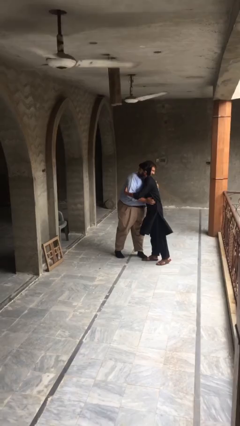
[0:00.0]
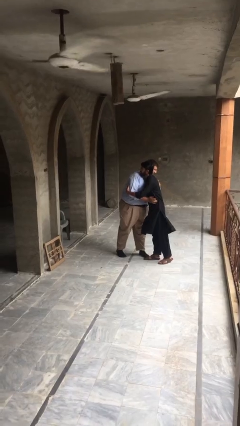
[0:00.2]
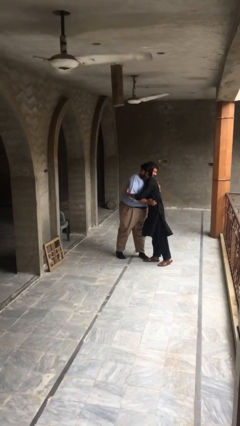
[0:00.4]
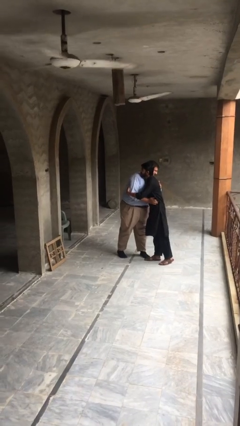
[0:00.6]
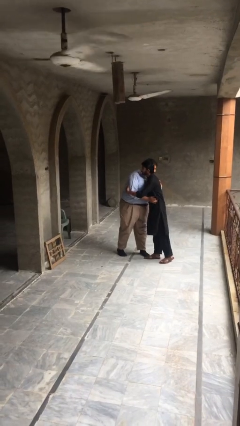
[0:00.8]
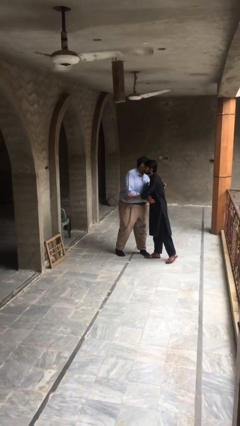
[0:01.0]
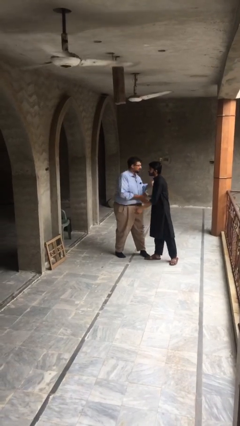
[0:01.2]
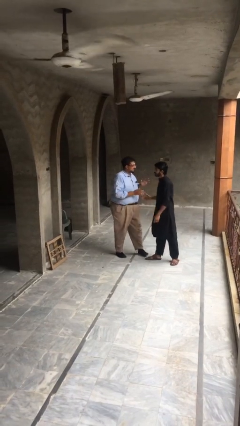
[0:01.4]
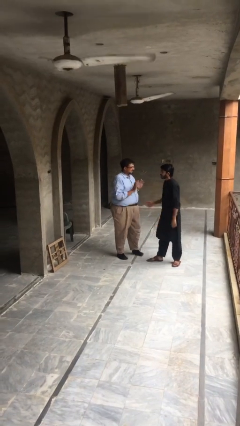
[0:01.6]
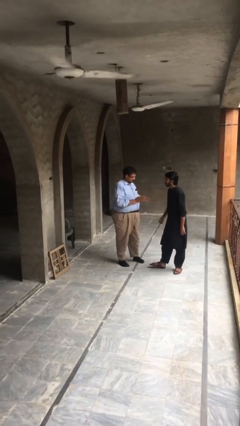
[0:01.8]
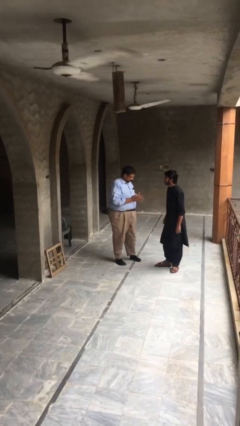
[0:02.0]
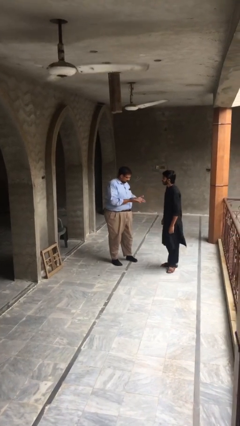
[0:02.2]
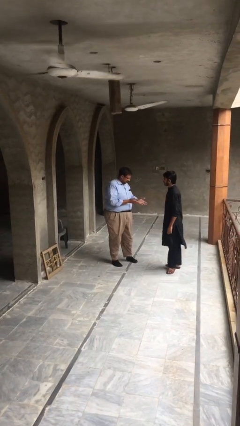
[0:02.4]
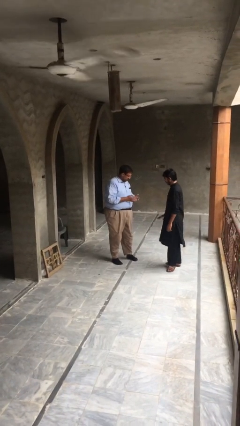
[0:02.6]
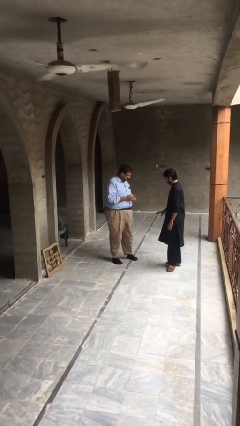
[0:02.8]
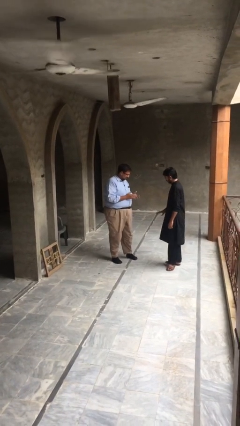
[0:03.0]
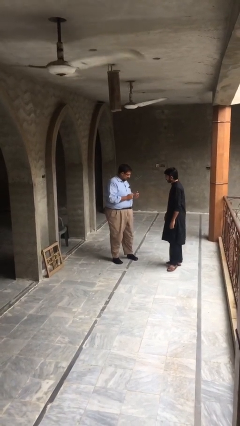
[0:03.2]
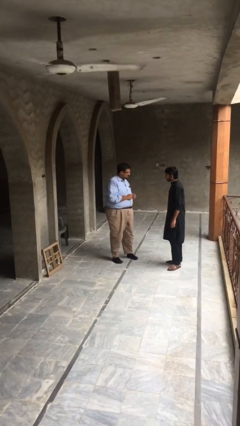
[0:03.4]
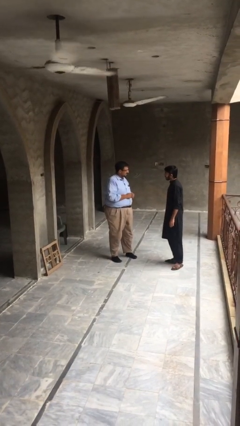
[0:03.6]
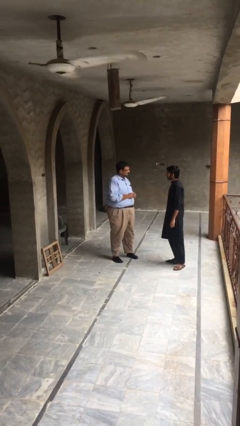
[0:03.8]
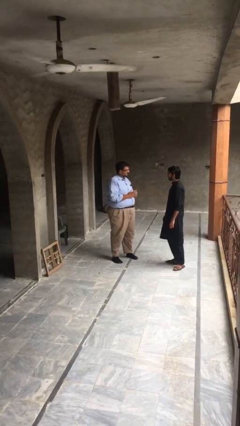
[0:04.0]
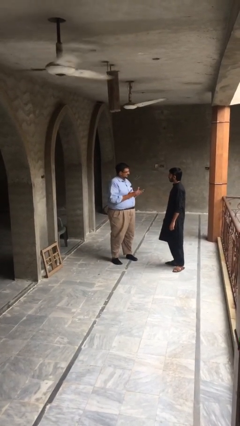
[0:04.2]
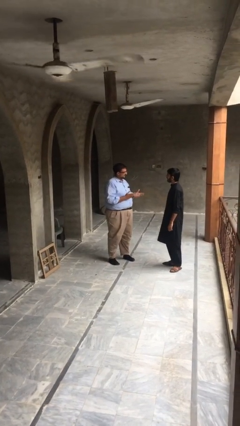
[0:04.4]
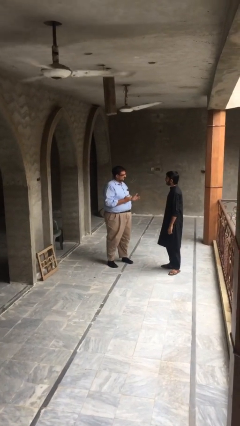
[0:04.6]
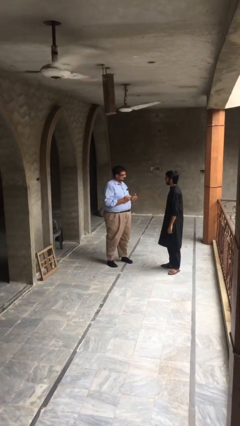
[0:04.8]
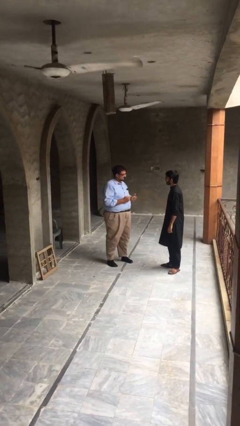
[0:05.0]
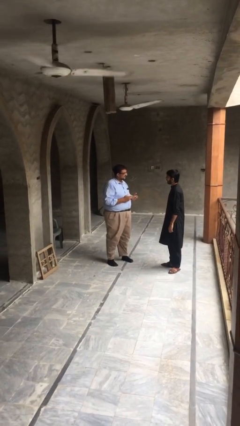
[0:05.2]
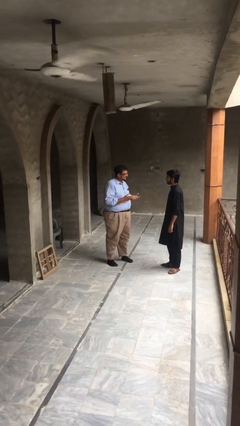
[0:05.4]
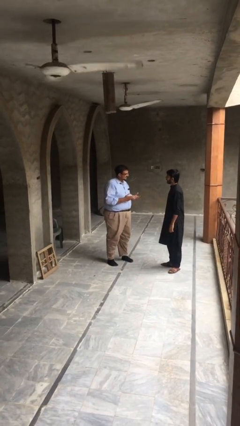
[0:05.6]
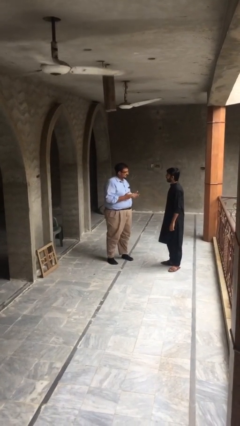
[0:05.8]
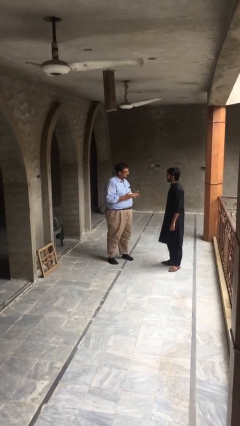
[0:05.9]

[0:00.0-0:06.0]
person talks to person

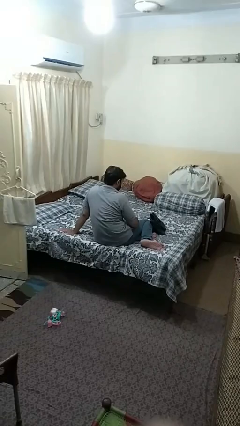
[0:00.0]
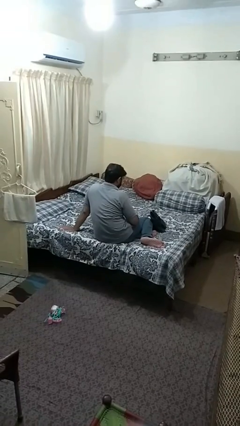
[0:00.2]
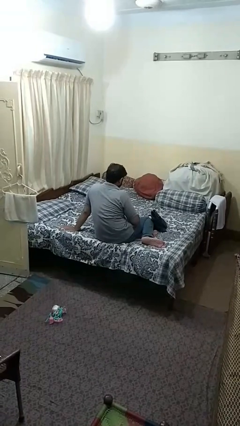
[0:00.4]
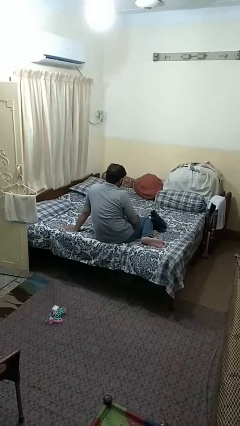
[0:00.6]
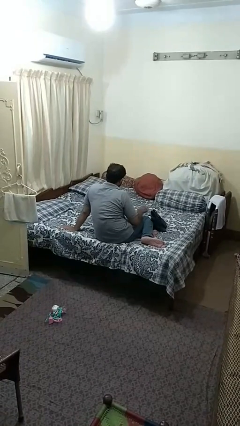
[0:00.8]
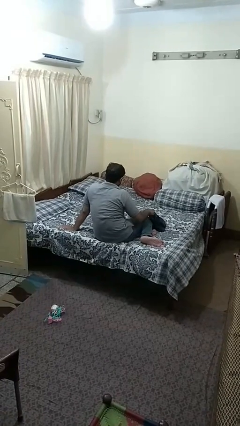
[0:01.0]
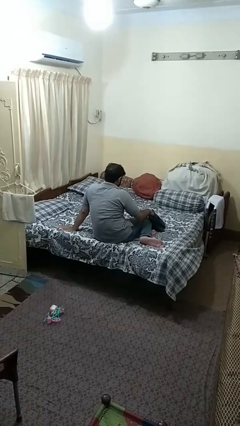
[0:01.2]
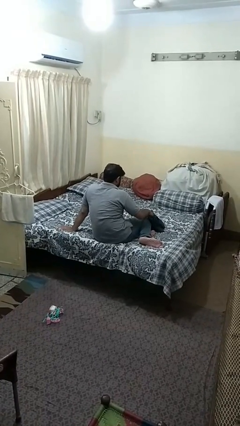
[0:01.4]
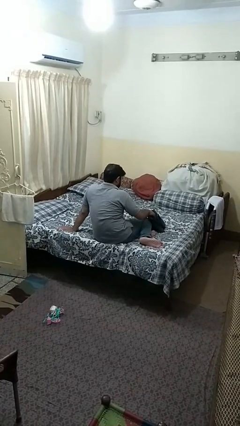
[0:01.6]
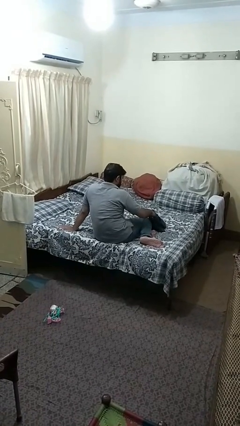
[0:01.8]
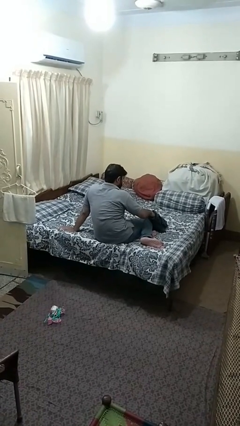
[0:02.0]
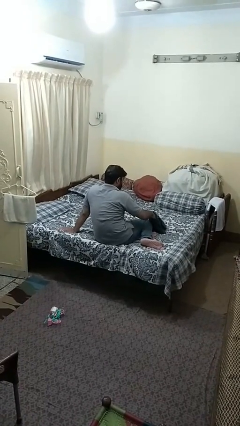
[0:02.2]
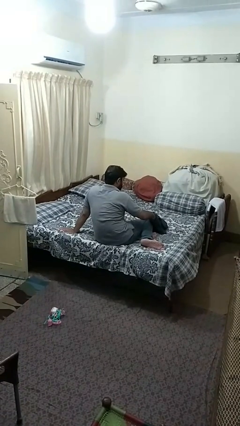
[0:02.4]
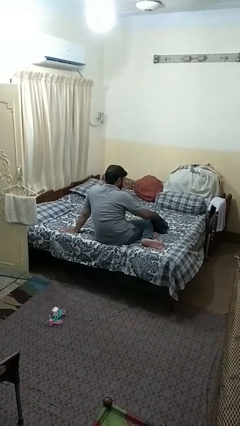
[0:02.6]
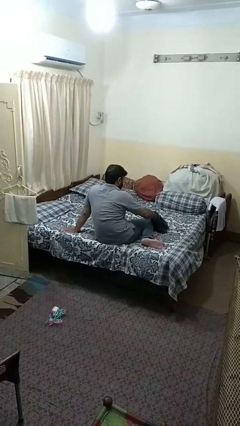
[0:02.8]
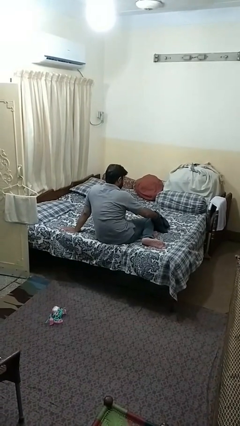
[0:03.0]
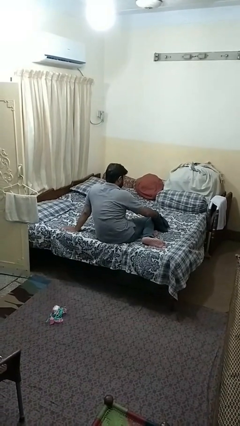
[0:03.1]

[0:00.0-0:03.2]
person searches in purse

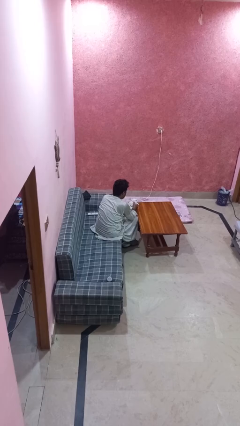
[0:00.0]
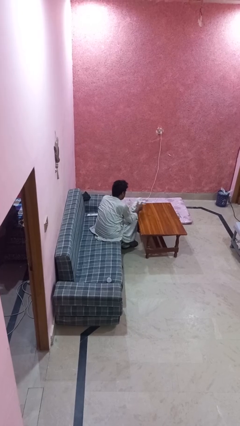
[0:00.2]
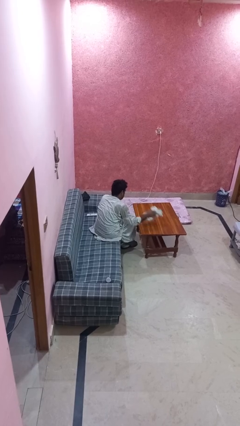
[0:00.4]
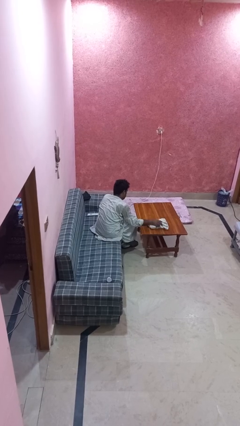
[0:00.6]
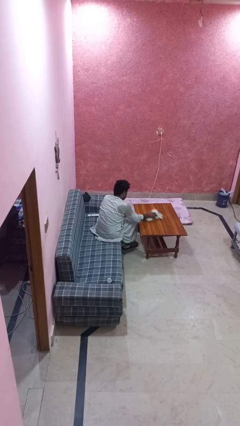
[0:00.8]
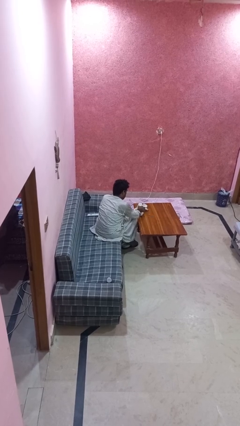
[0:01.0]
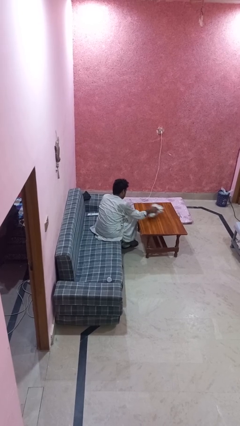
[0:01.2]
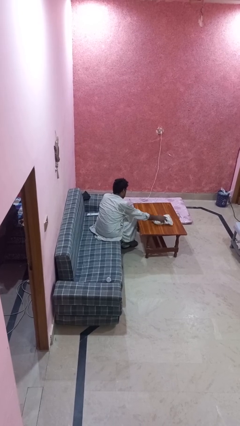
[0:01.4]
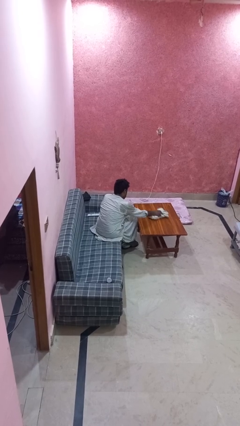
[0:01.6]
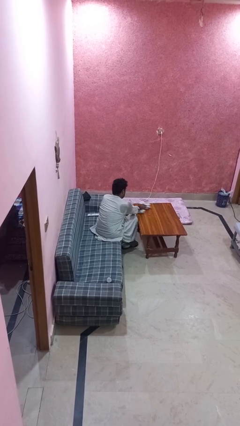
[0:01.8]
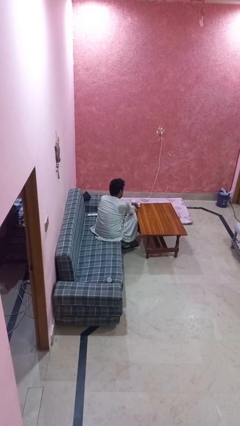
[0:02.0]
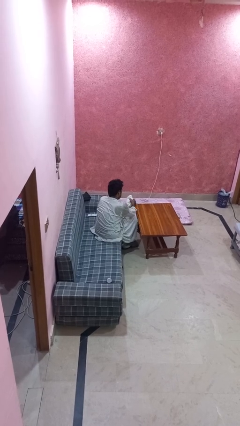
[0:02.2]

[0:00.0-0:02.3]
person cleans table with rag

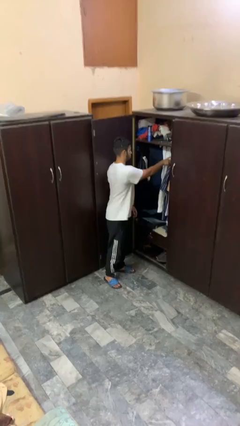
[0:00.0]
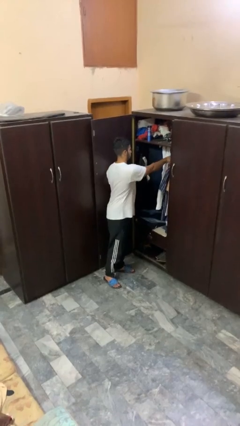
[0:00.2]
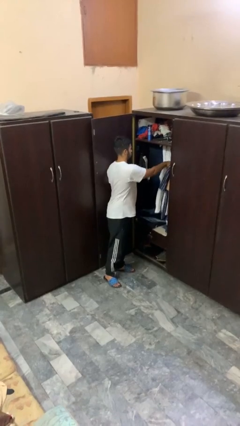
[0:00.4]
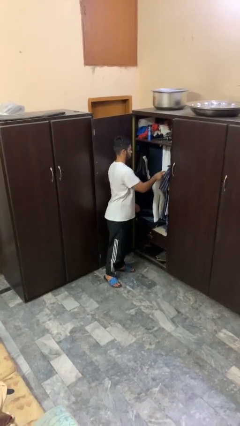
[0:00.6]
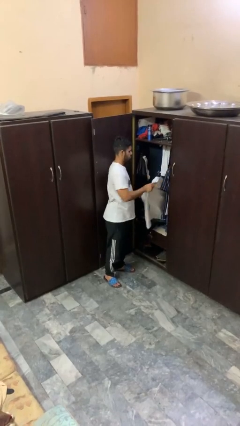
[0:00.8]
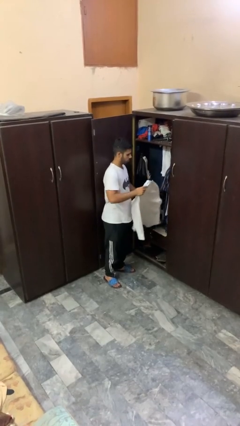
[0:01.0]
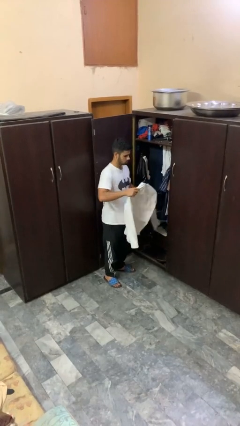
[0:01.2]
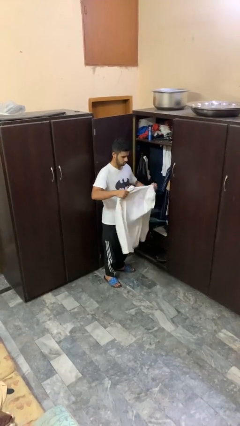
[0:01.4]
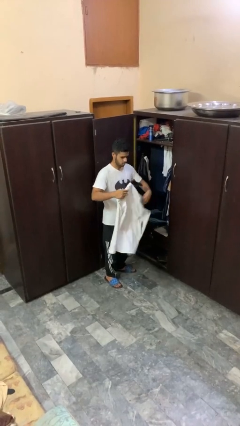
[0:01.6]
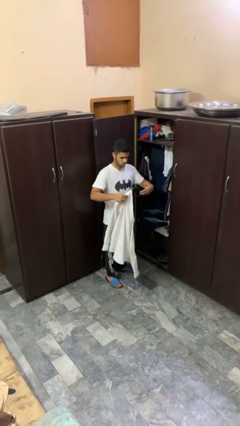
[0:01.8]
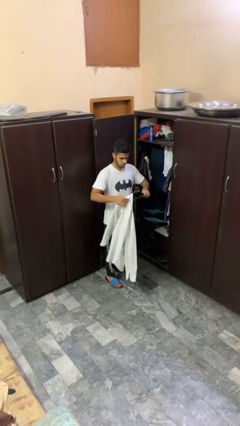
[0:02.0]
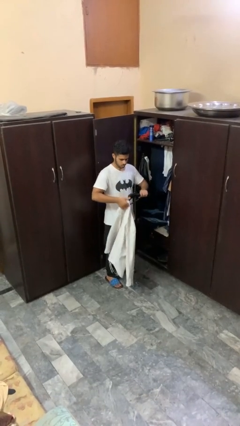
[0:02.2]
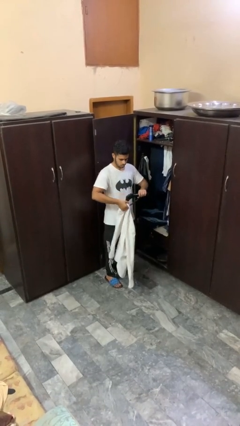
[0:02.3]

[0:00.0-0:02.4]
person takes clothes from closet

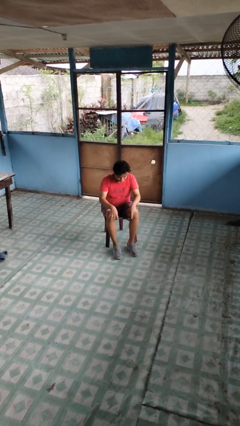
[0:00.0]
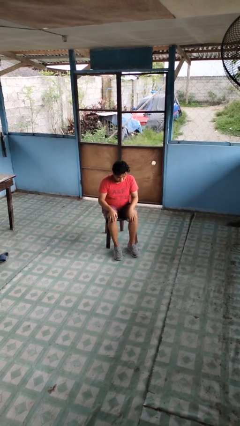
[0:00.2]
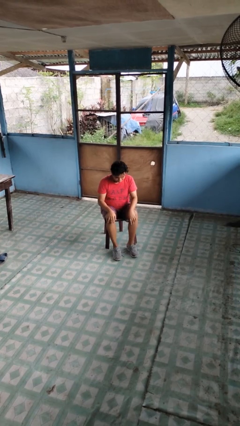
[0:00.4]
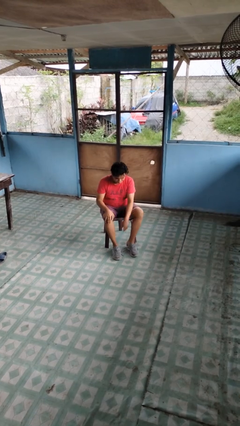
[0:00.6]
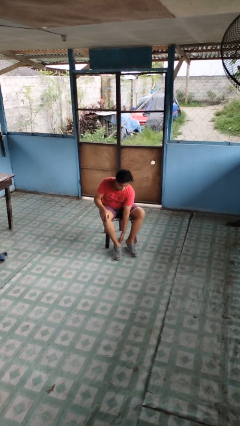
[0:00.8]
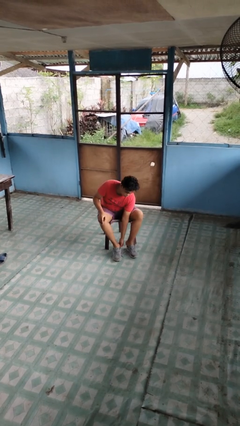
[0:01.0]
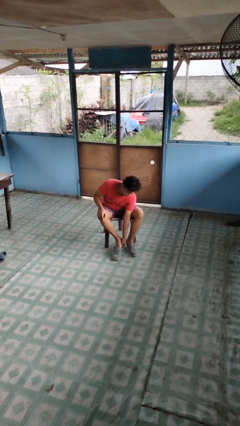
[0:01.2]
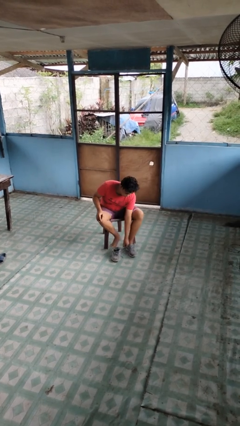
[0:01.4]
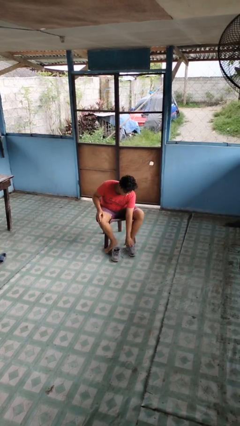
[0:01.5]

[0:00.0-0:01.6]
person takes off shoes

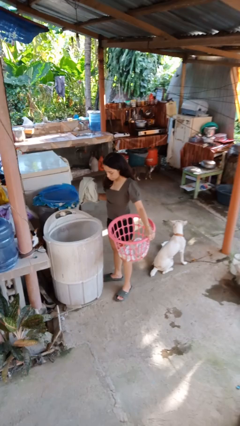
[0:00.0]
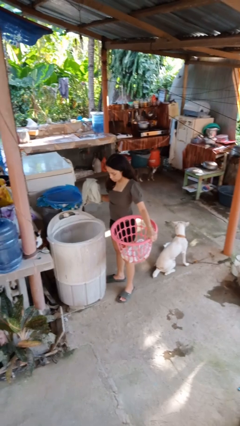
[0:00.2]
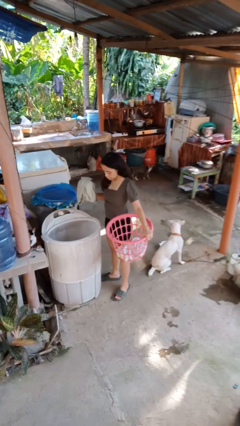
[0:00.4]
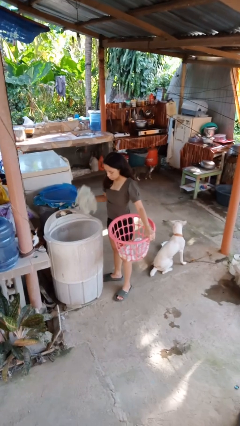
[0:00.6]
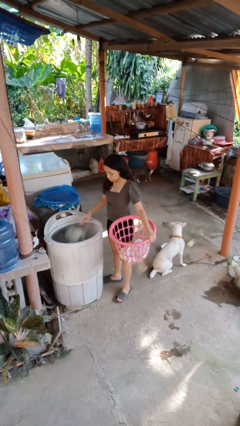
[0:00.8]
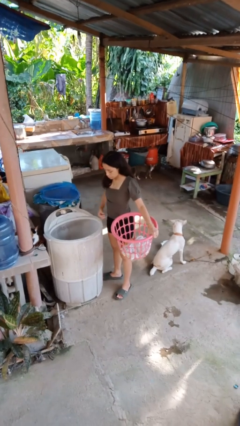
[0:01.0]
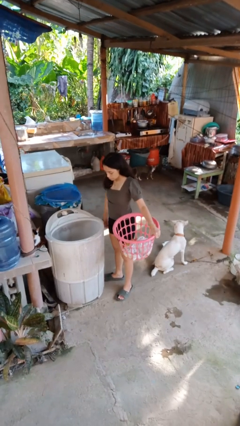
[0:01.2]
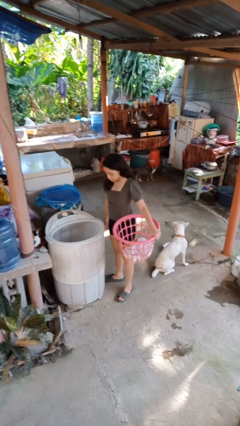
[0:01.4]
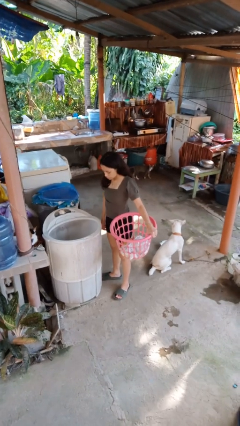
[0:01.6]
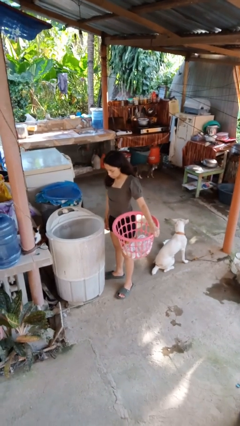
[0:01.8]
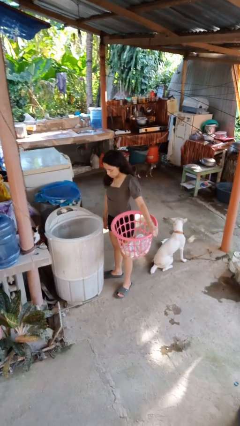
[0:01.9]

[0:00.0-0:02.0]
person loads dryer

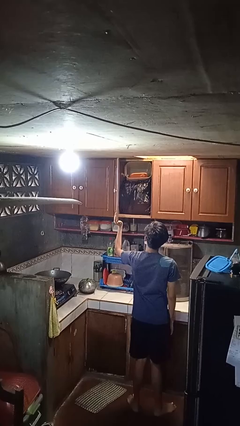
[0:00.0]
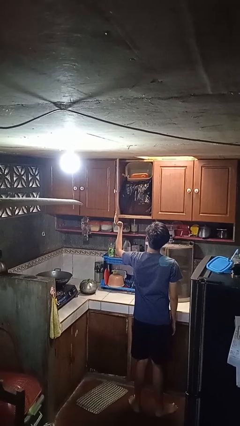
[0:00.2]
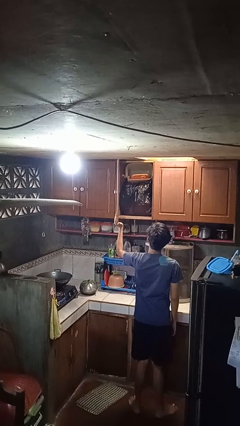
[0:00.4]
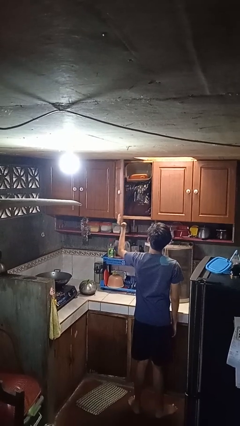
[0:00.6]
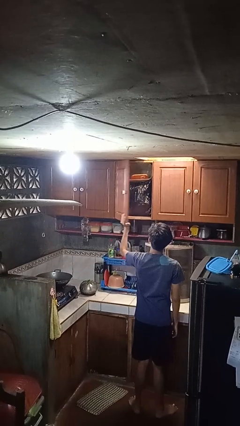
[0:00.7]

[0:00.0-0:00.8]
person closes cabinet
